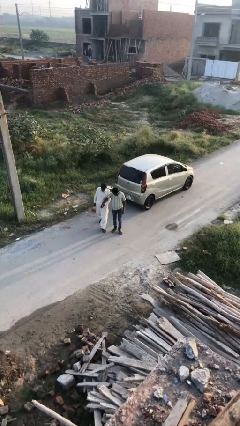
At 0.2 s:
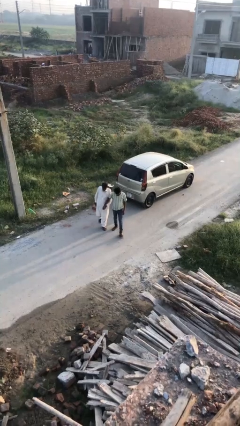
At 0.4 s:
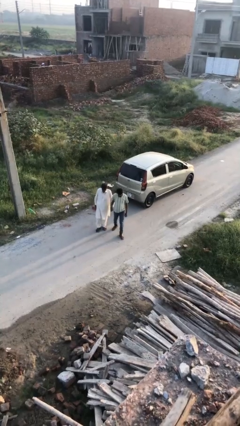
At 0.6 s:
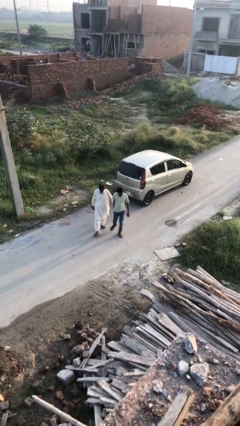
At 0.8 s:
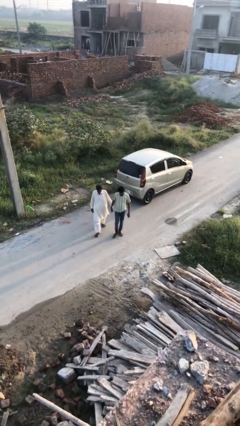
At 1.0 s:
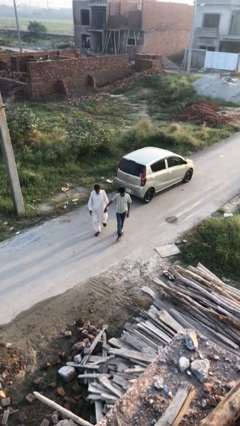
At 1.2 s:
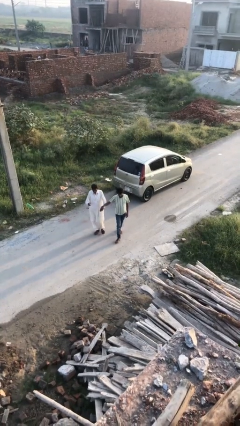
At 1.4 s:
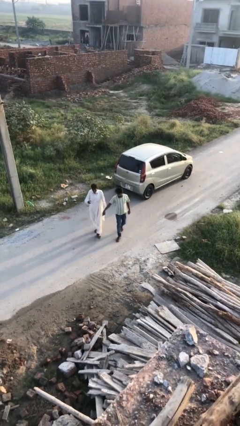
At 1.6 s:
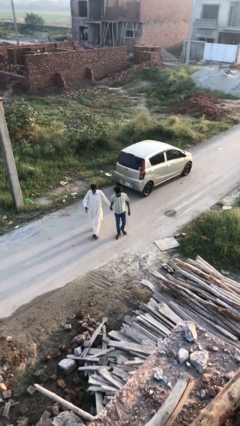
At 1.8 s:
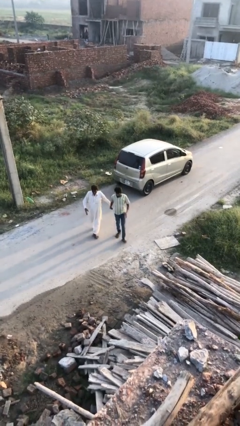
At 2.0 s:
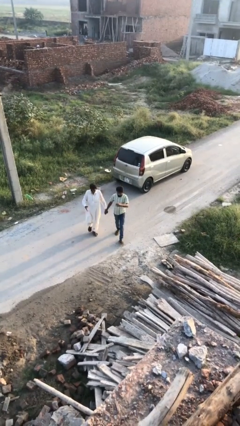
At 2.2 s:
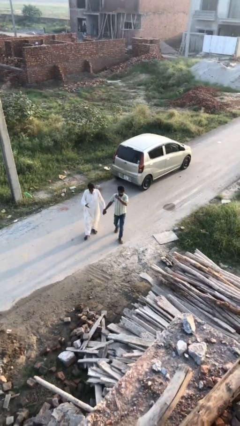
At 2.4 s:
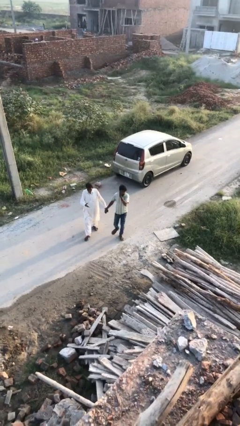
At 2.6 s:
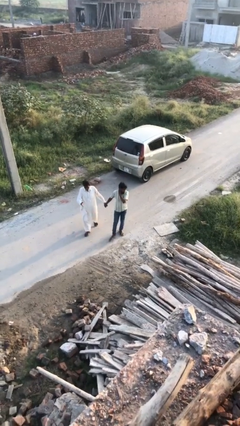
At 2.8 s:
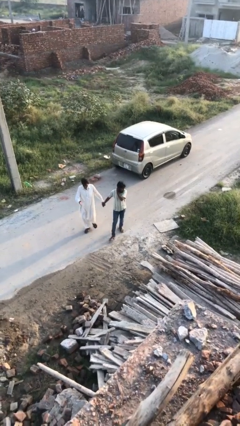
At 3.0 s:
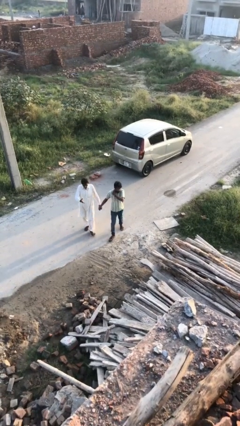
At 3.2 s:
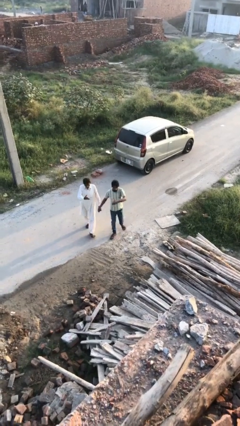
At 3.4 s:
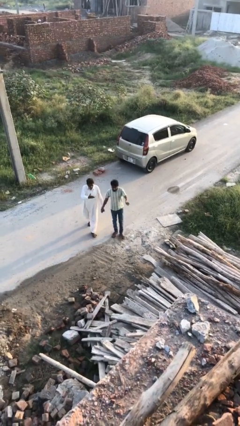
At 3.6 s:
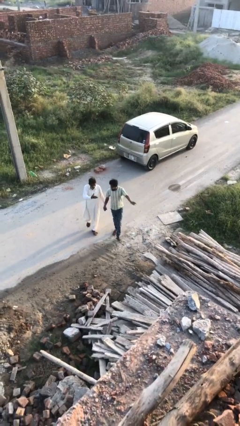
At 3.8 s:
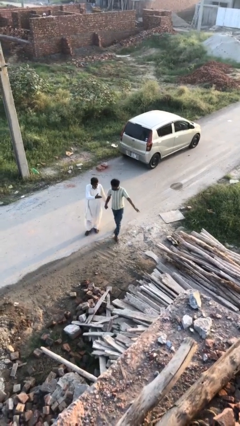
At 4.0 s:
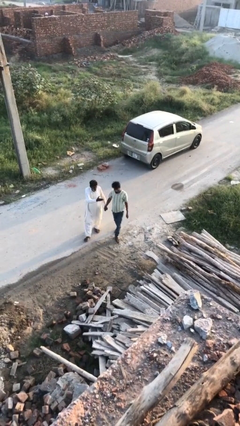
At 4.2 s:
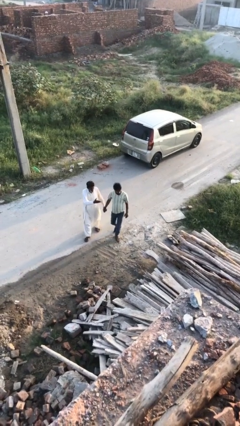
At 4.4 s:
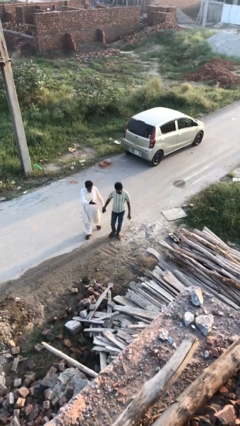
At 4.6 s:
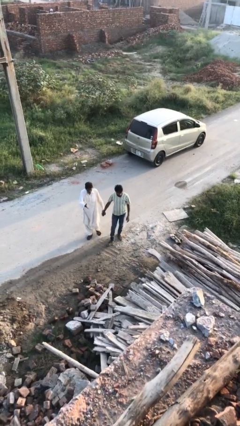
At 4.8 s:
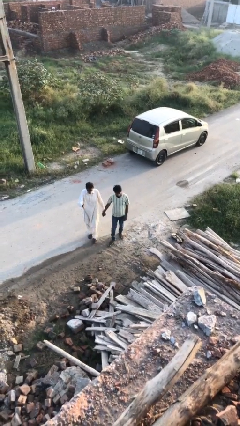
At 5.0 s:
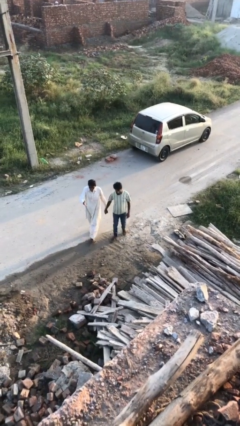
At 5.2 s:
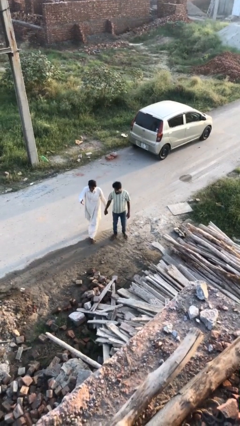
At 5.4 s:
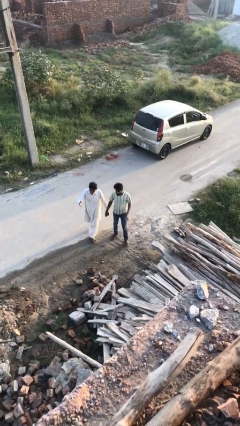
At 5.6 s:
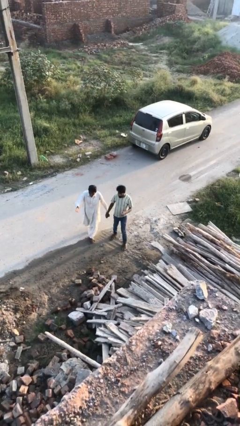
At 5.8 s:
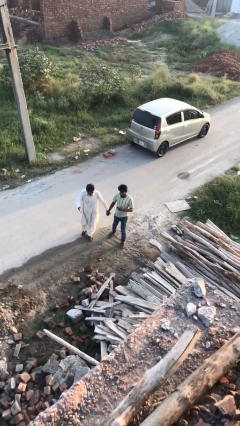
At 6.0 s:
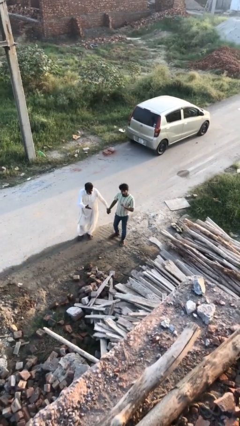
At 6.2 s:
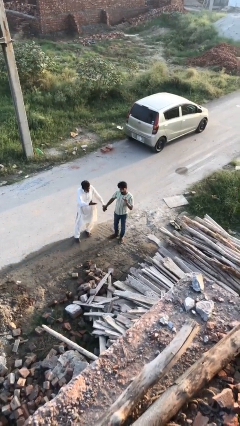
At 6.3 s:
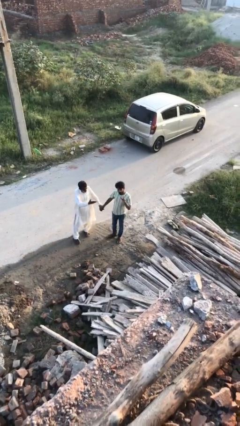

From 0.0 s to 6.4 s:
person holds hand

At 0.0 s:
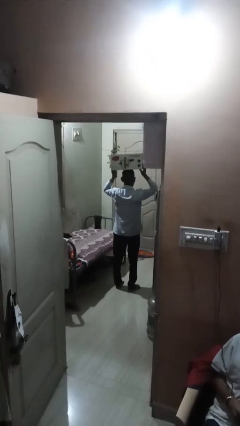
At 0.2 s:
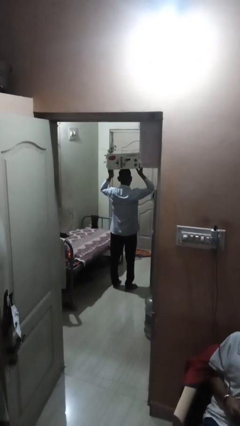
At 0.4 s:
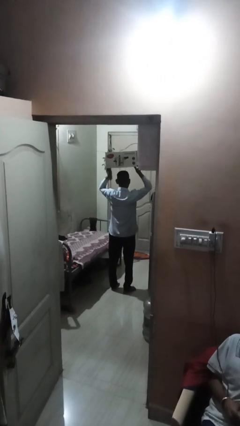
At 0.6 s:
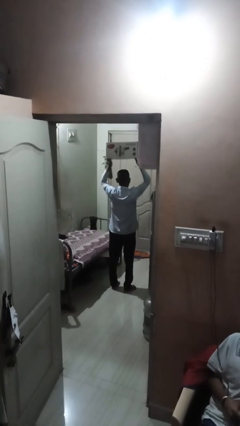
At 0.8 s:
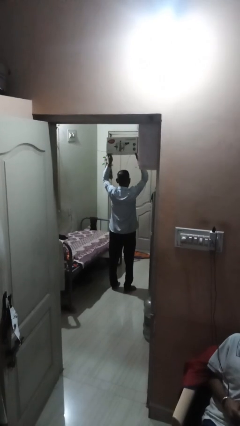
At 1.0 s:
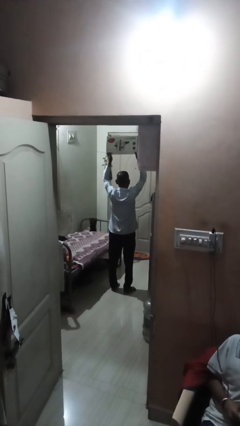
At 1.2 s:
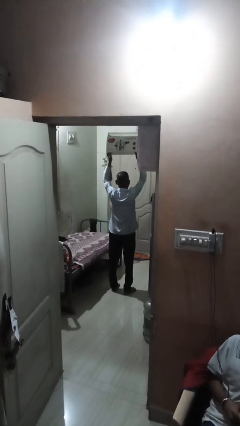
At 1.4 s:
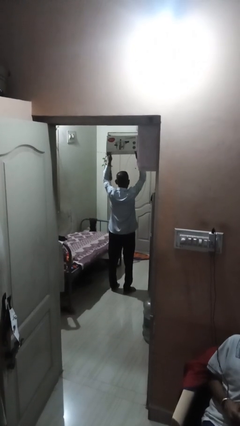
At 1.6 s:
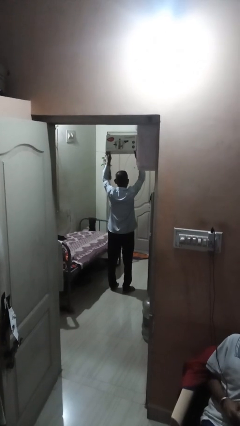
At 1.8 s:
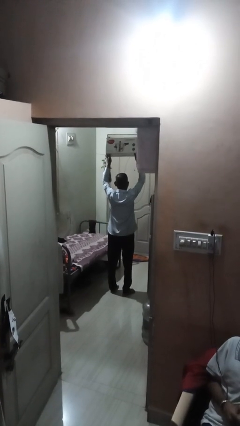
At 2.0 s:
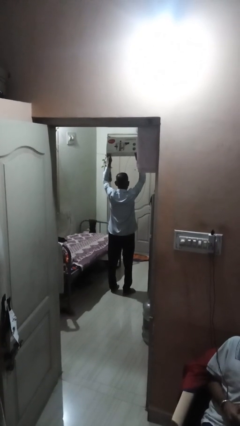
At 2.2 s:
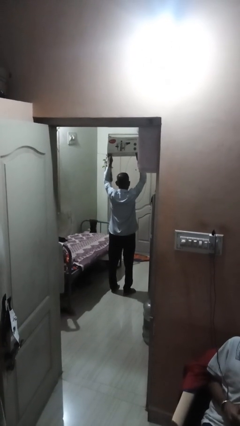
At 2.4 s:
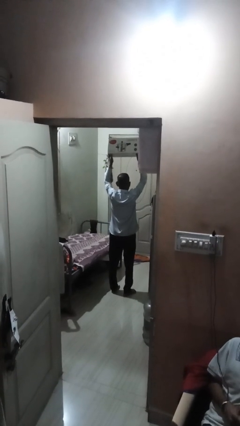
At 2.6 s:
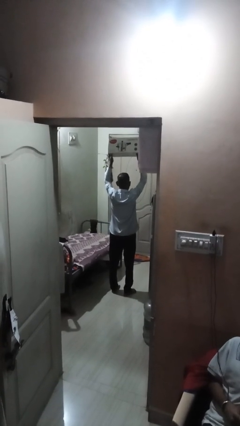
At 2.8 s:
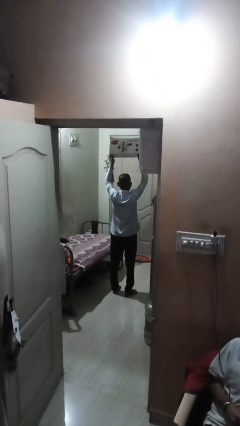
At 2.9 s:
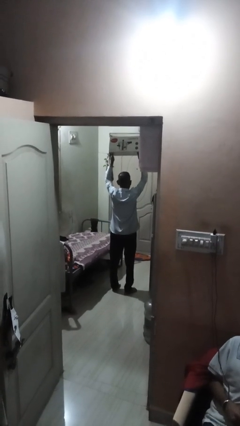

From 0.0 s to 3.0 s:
person holds object above head

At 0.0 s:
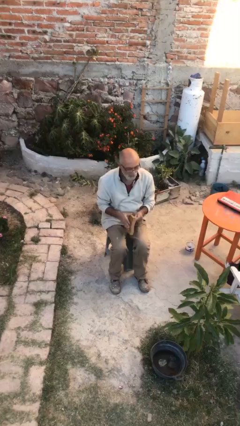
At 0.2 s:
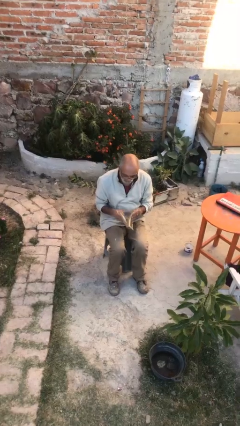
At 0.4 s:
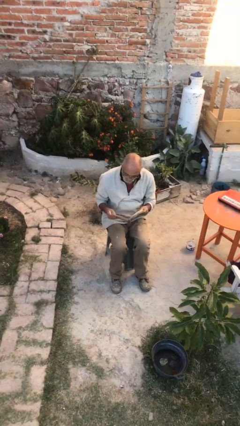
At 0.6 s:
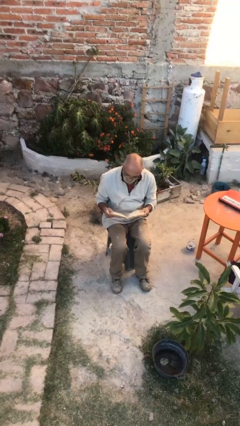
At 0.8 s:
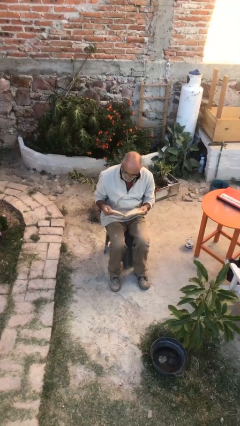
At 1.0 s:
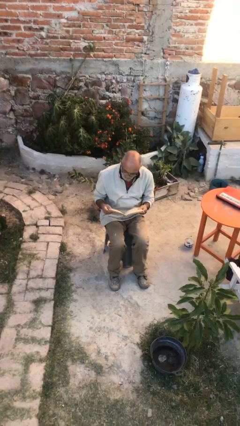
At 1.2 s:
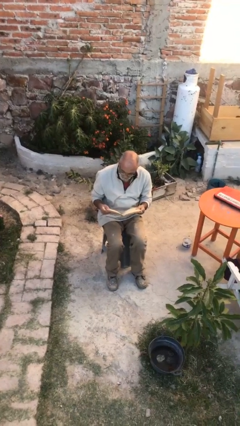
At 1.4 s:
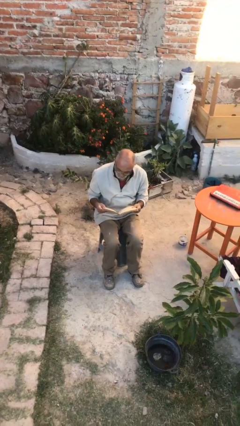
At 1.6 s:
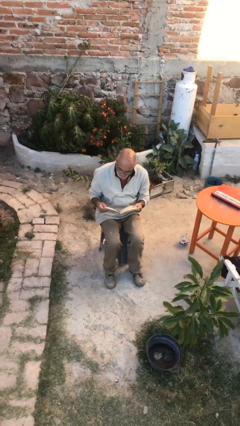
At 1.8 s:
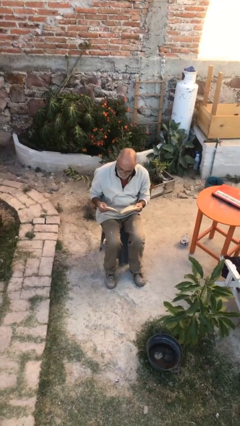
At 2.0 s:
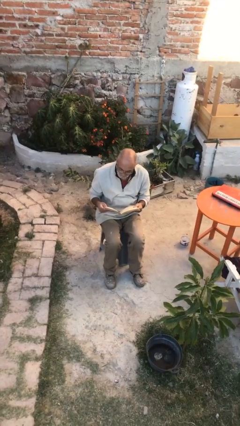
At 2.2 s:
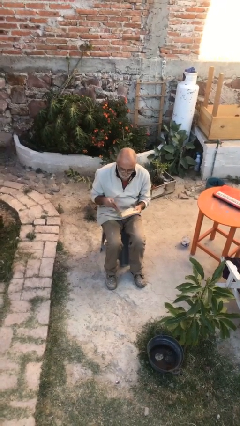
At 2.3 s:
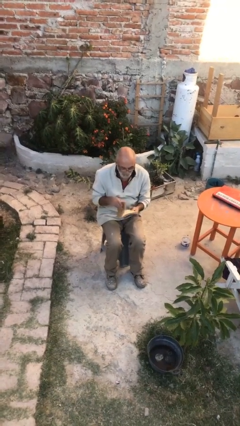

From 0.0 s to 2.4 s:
person reads document

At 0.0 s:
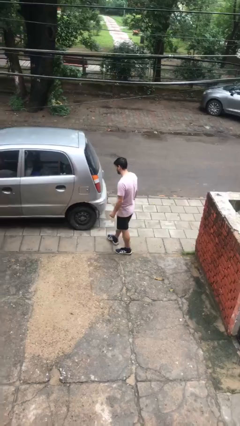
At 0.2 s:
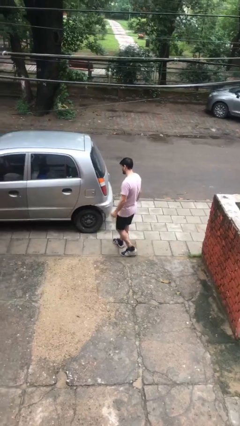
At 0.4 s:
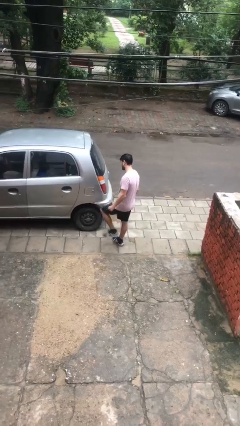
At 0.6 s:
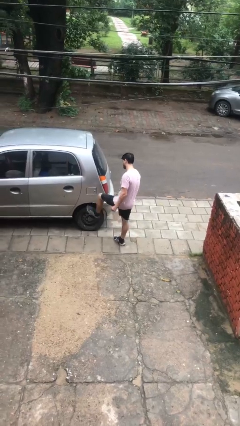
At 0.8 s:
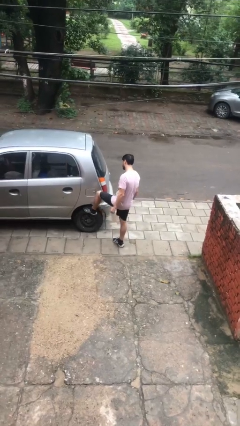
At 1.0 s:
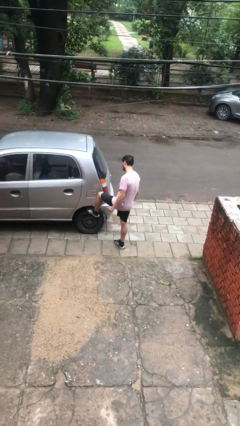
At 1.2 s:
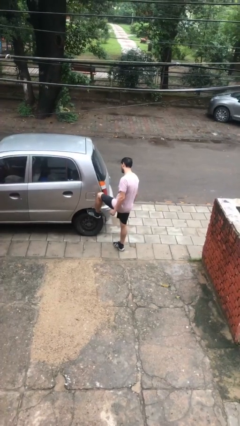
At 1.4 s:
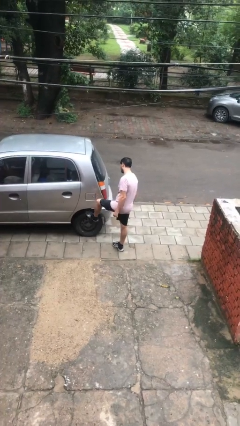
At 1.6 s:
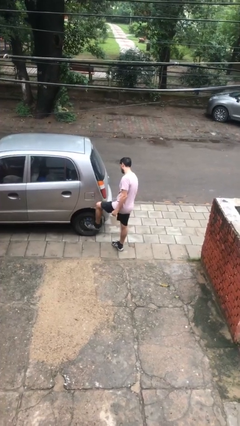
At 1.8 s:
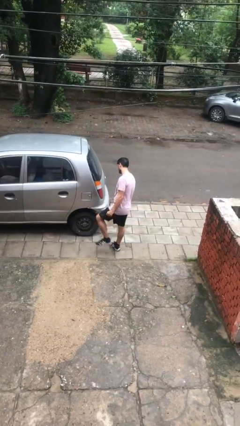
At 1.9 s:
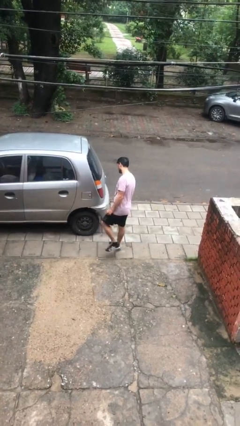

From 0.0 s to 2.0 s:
person kicks car tires

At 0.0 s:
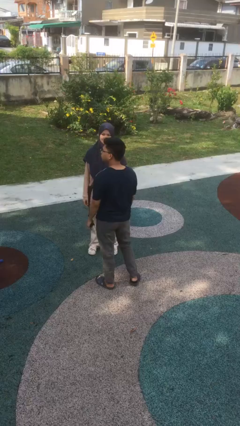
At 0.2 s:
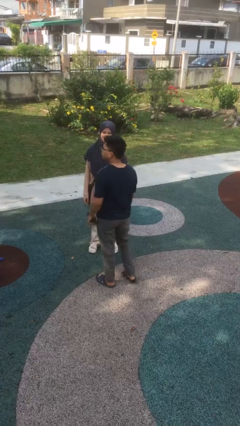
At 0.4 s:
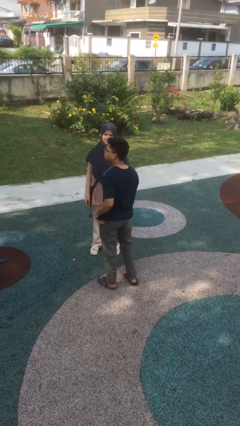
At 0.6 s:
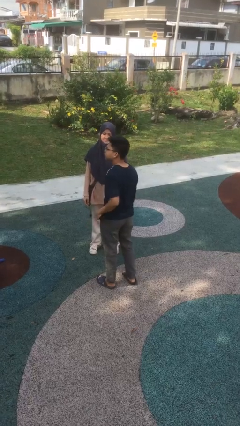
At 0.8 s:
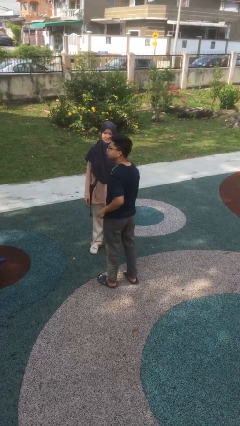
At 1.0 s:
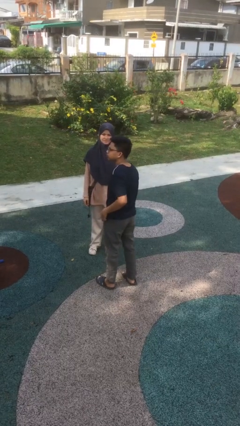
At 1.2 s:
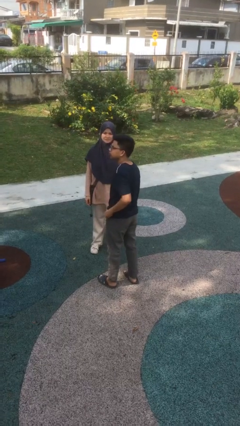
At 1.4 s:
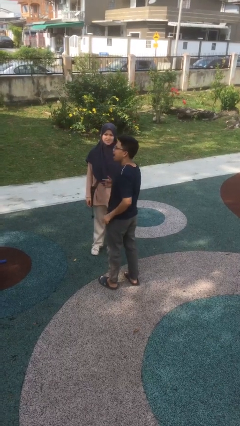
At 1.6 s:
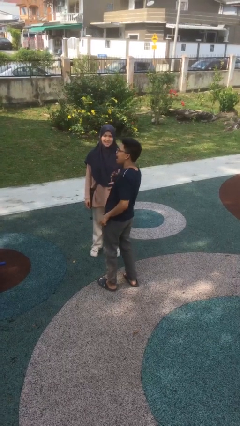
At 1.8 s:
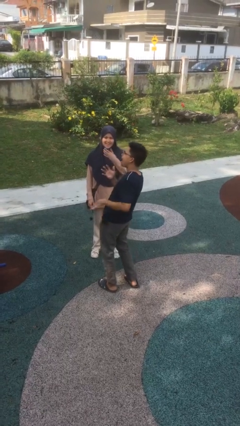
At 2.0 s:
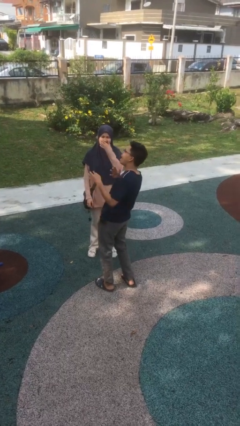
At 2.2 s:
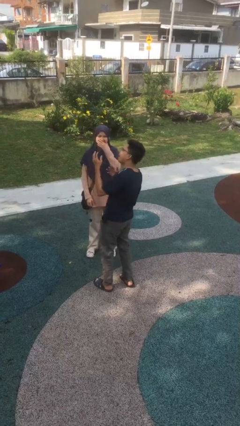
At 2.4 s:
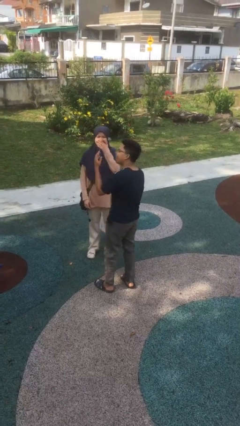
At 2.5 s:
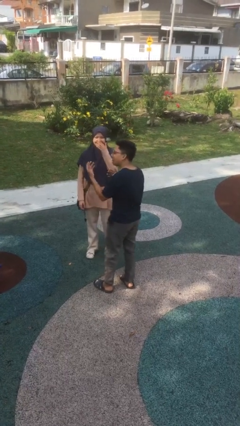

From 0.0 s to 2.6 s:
person laughs with person

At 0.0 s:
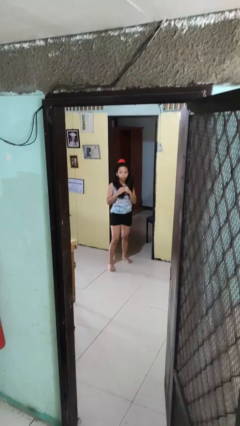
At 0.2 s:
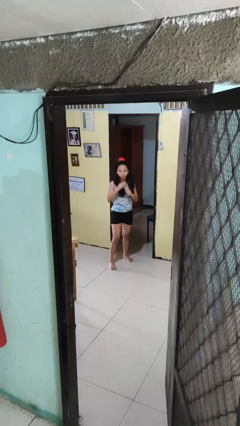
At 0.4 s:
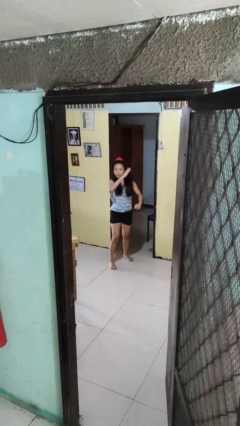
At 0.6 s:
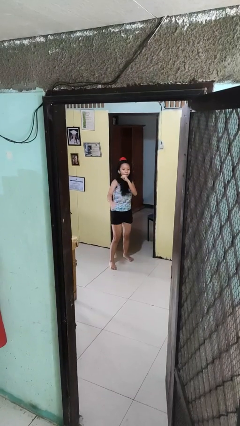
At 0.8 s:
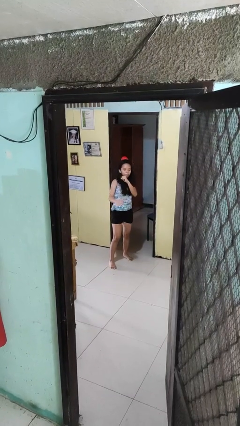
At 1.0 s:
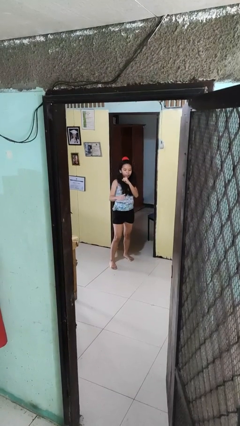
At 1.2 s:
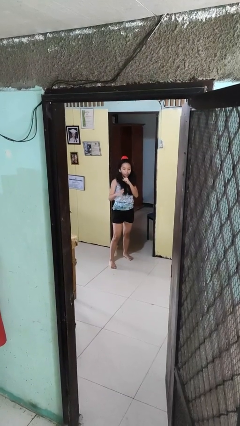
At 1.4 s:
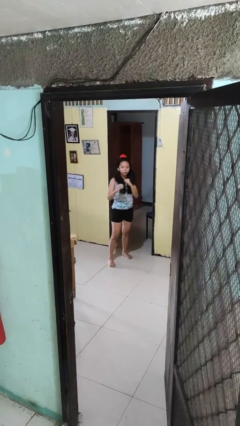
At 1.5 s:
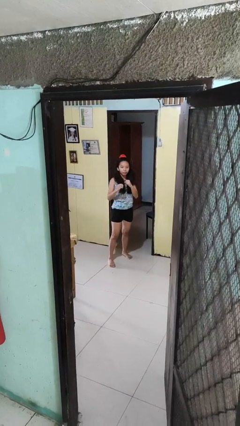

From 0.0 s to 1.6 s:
person karate chop
